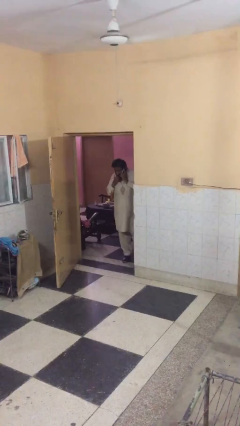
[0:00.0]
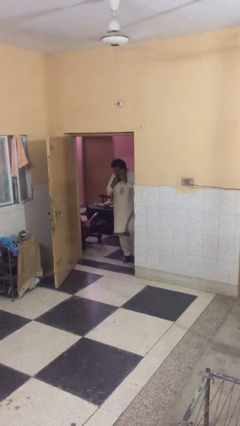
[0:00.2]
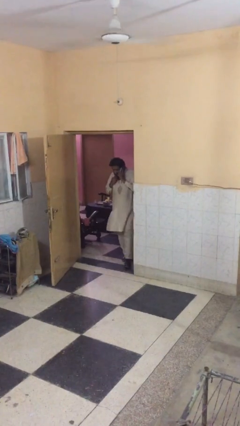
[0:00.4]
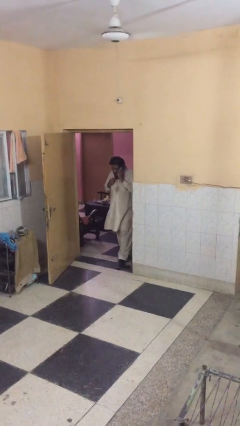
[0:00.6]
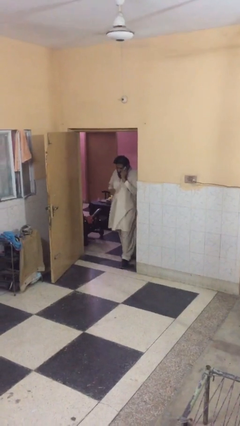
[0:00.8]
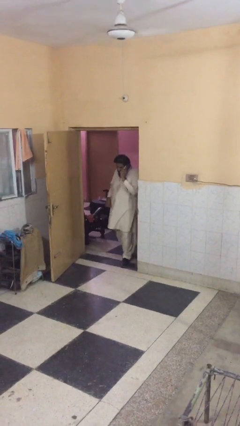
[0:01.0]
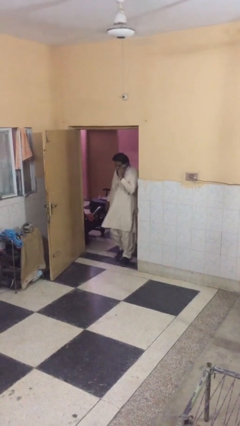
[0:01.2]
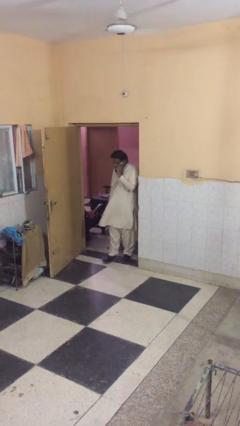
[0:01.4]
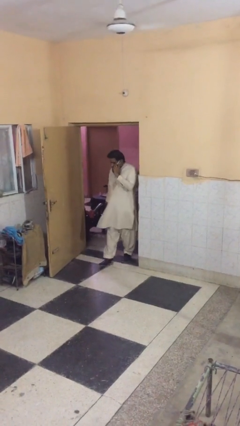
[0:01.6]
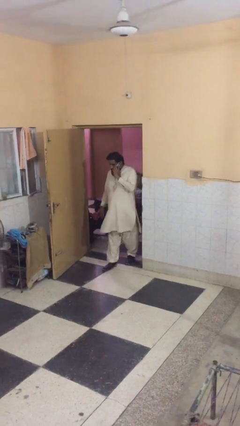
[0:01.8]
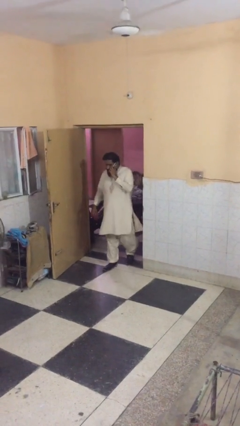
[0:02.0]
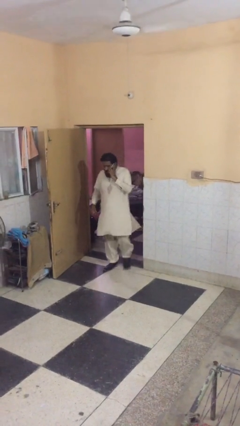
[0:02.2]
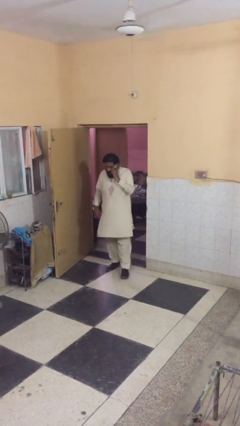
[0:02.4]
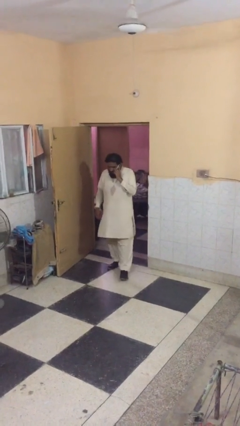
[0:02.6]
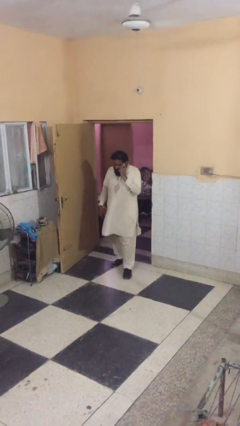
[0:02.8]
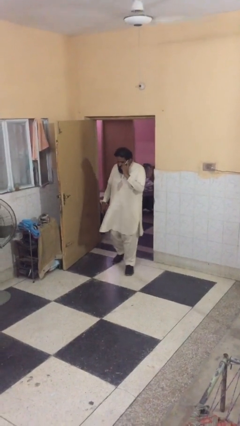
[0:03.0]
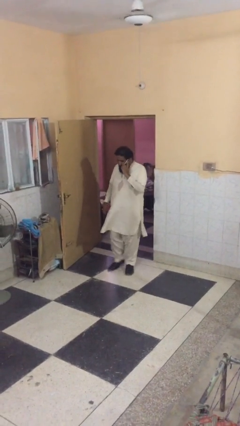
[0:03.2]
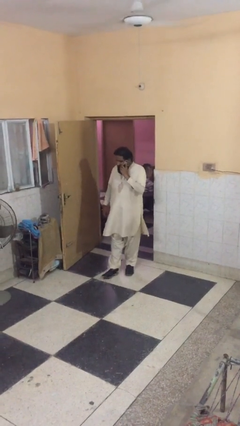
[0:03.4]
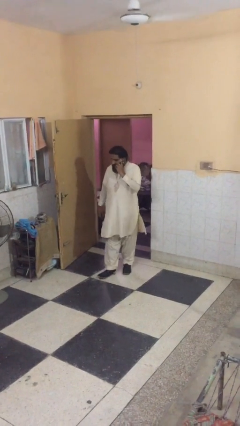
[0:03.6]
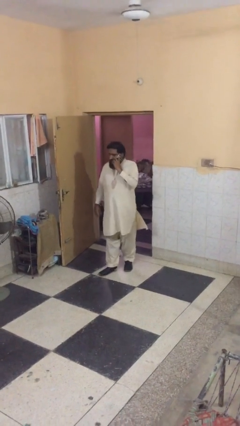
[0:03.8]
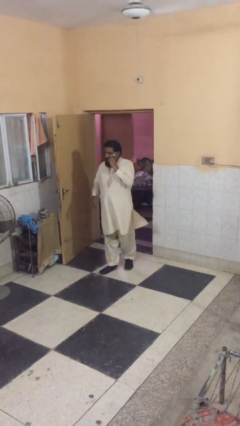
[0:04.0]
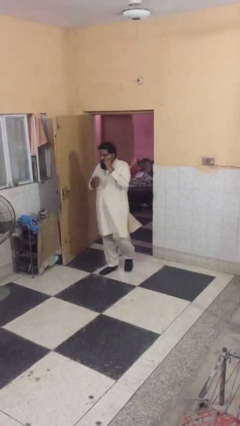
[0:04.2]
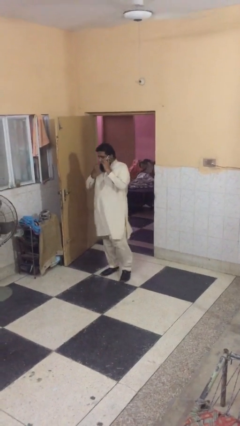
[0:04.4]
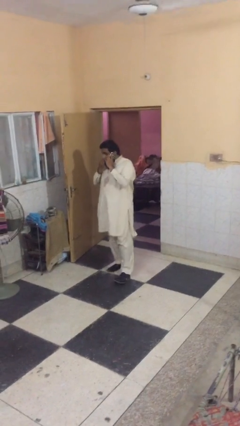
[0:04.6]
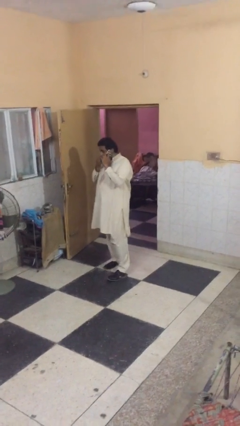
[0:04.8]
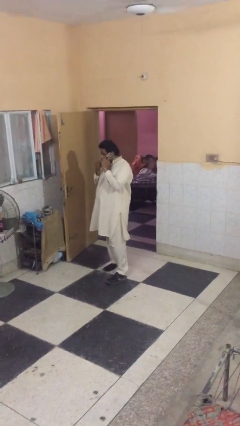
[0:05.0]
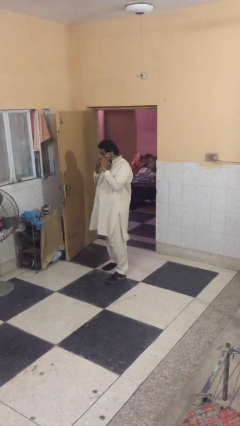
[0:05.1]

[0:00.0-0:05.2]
person enters scene through structure

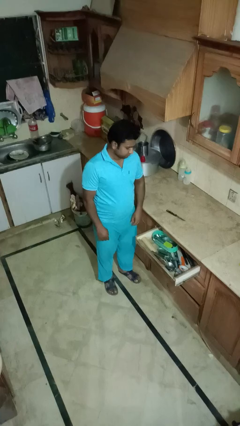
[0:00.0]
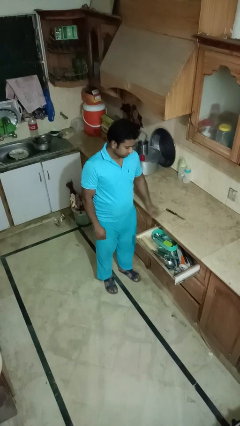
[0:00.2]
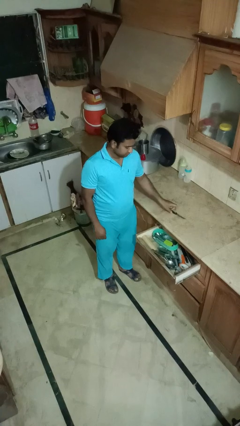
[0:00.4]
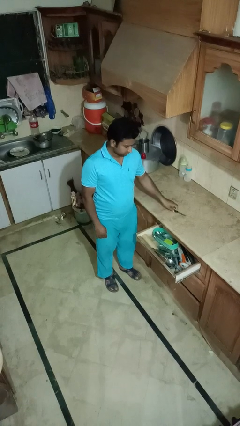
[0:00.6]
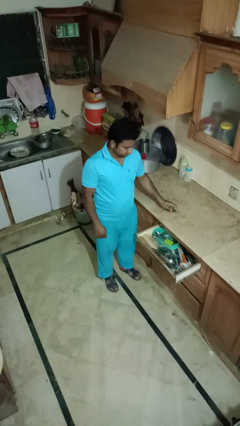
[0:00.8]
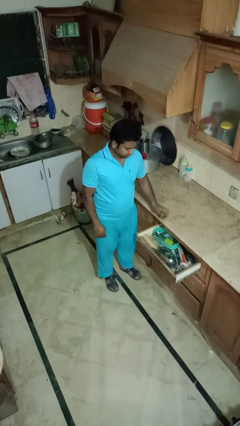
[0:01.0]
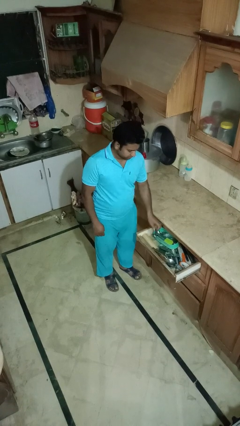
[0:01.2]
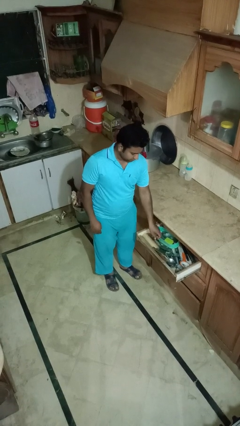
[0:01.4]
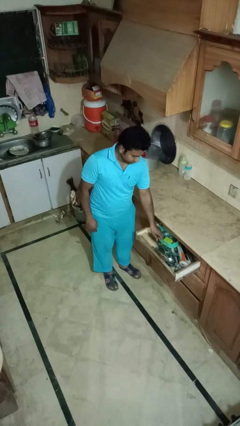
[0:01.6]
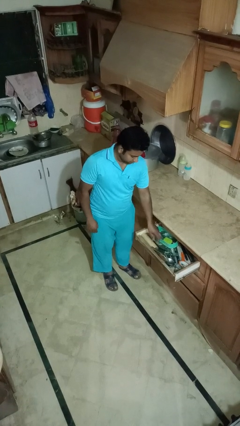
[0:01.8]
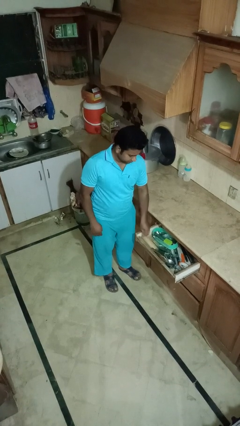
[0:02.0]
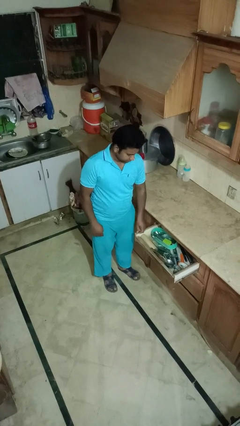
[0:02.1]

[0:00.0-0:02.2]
person puts object into kitchen drawer

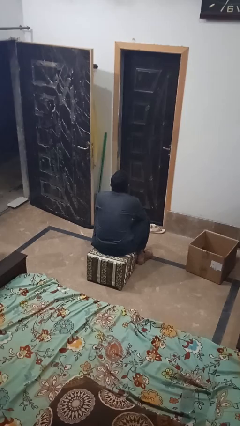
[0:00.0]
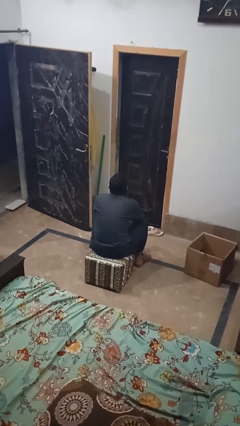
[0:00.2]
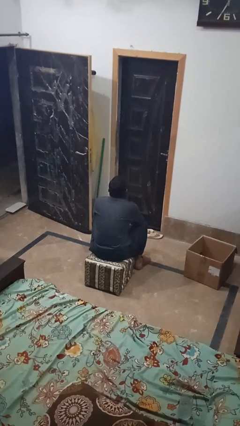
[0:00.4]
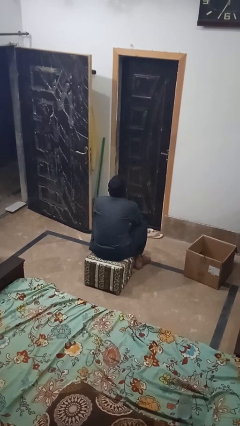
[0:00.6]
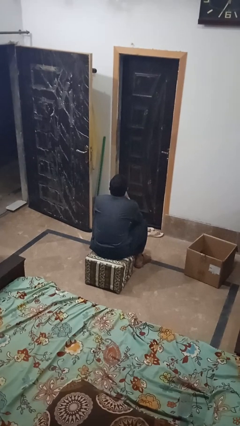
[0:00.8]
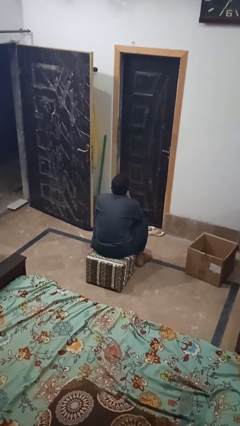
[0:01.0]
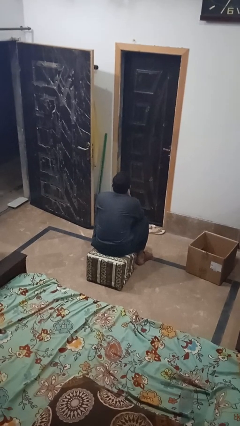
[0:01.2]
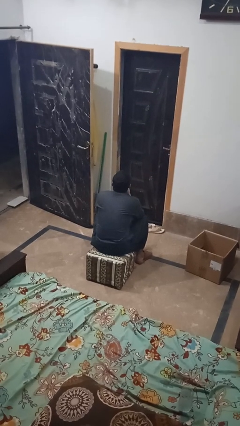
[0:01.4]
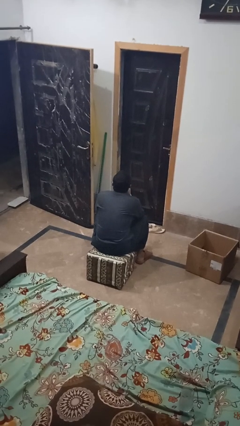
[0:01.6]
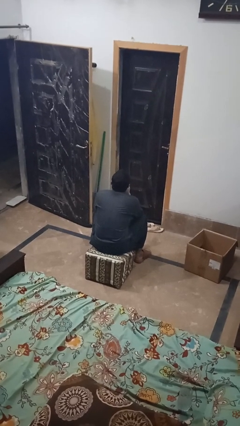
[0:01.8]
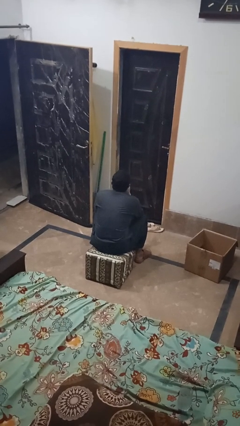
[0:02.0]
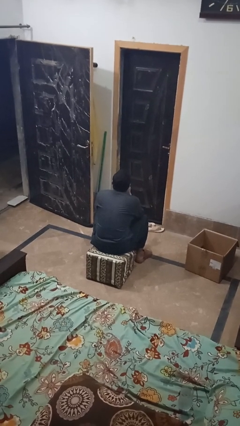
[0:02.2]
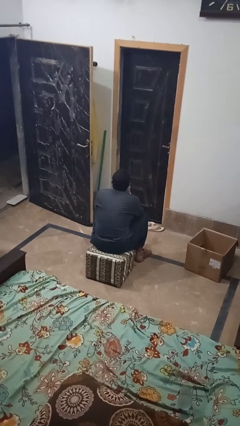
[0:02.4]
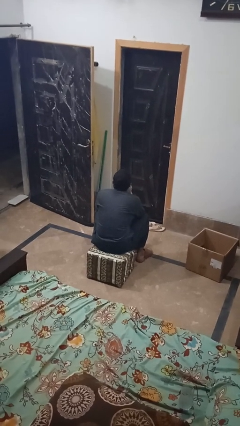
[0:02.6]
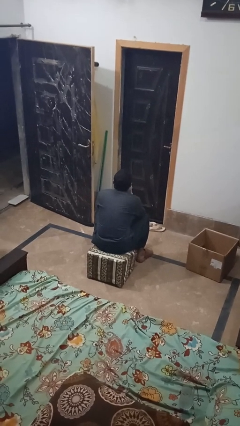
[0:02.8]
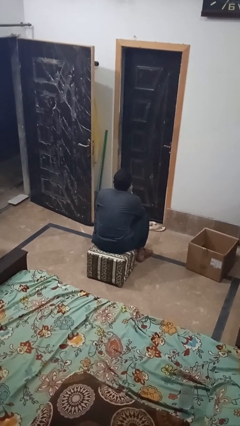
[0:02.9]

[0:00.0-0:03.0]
person strokes chin

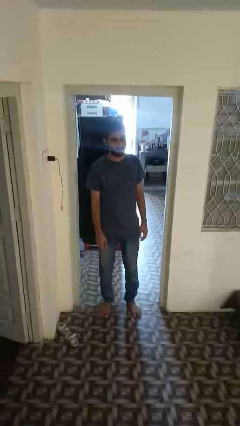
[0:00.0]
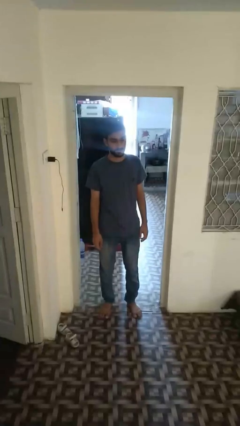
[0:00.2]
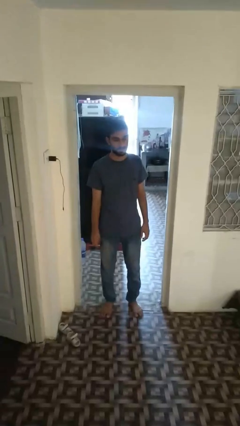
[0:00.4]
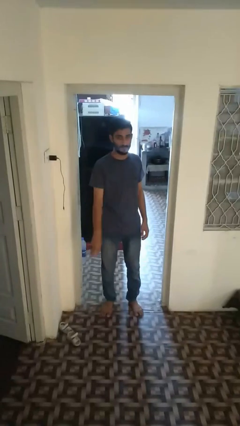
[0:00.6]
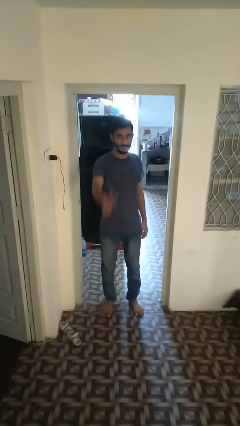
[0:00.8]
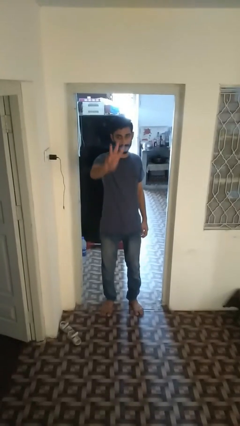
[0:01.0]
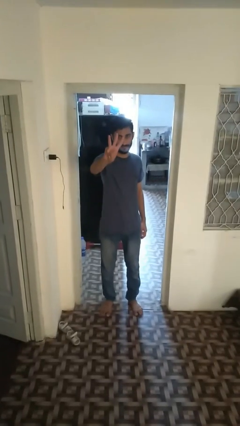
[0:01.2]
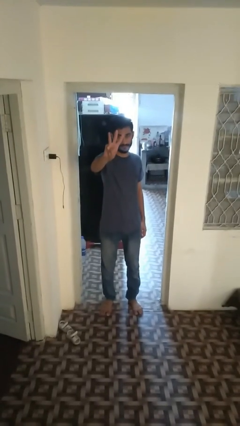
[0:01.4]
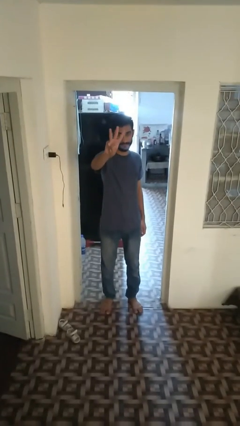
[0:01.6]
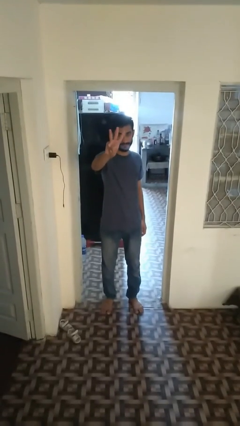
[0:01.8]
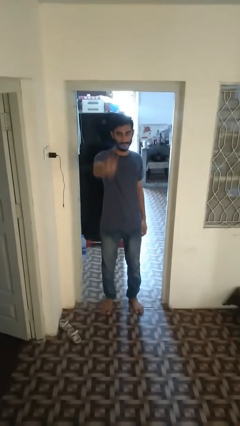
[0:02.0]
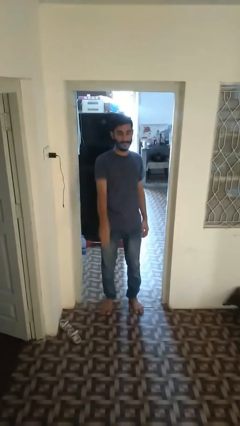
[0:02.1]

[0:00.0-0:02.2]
person gestures number three

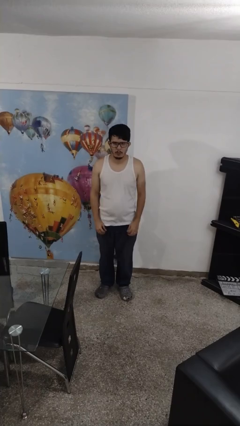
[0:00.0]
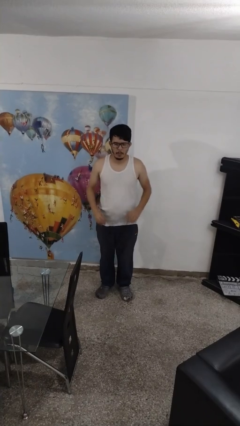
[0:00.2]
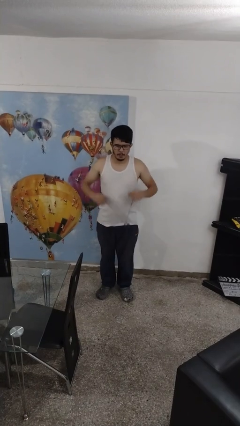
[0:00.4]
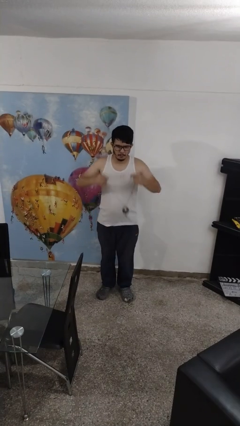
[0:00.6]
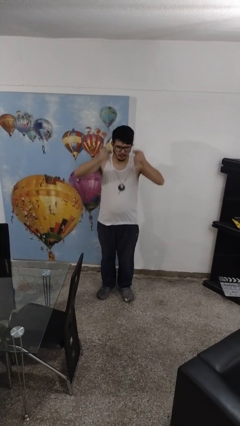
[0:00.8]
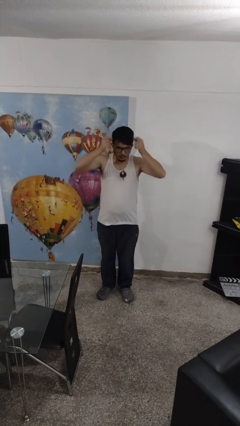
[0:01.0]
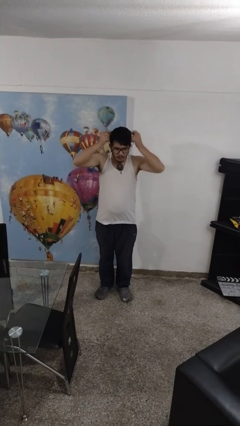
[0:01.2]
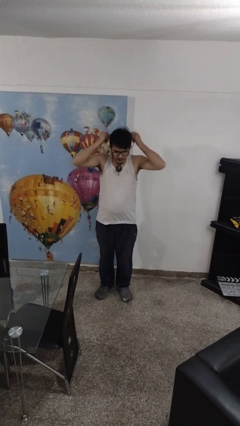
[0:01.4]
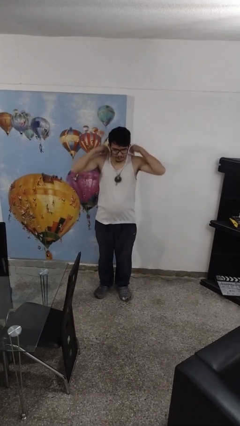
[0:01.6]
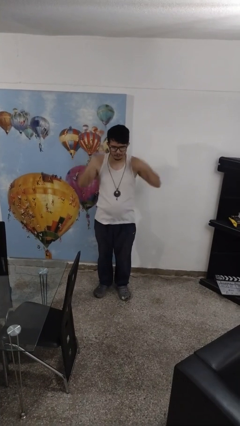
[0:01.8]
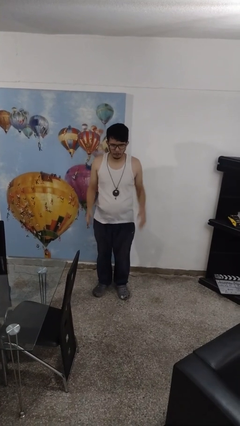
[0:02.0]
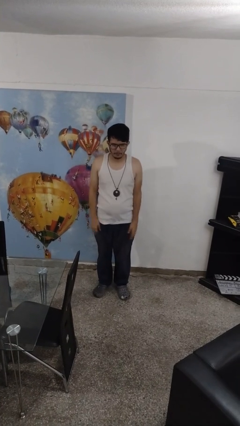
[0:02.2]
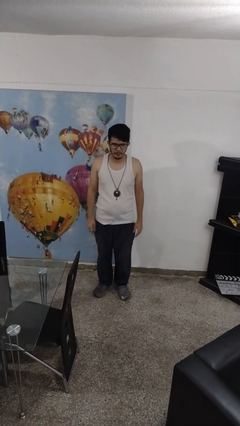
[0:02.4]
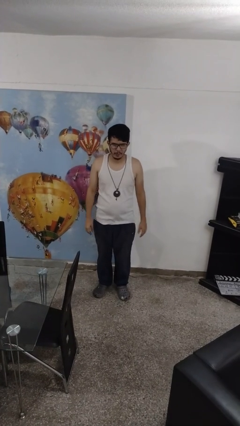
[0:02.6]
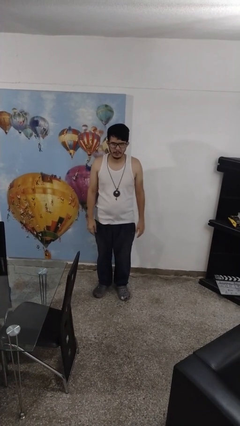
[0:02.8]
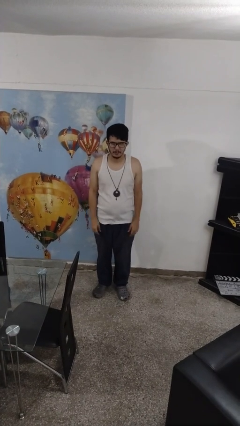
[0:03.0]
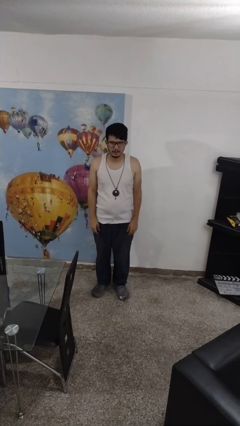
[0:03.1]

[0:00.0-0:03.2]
person puts on necklace

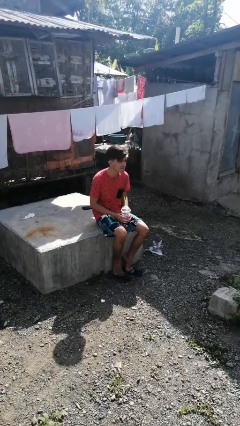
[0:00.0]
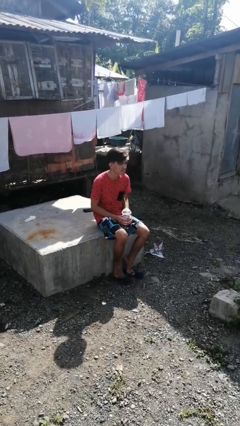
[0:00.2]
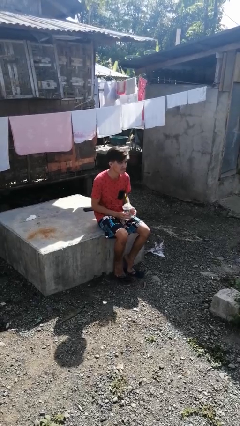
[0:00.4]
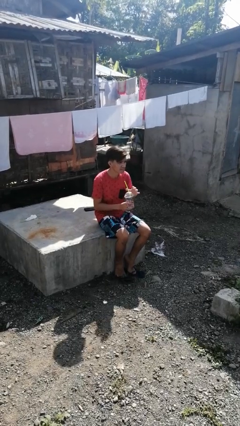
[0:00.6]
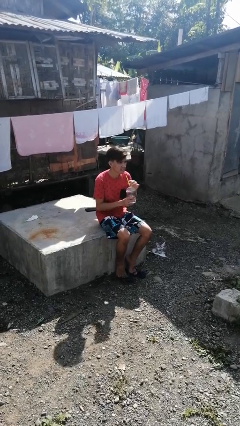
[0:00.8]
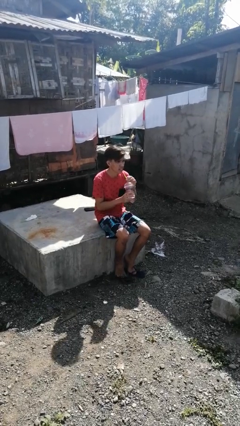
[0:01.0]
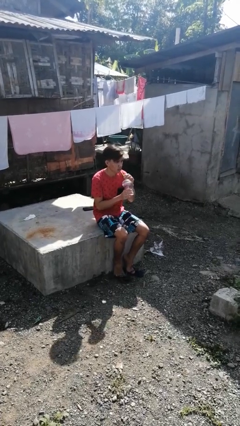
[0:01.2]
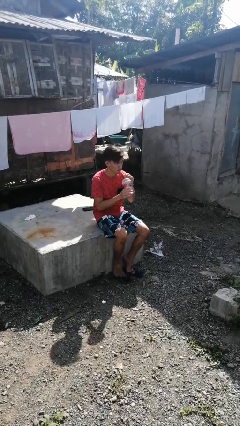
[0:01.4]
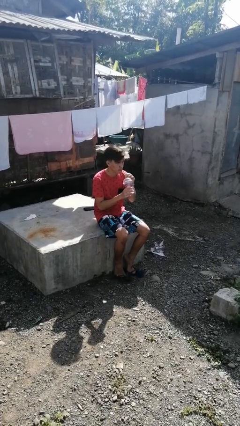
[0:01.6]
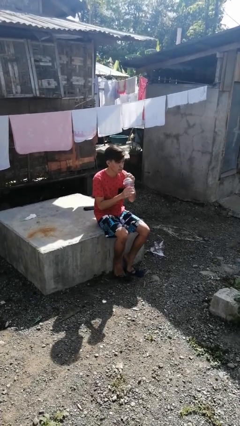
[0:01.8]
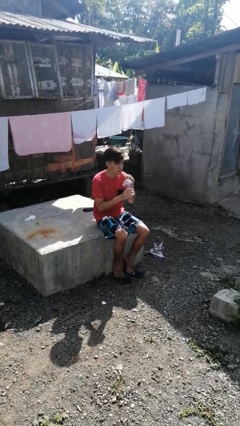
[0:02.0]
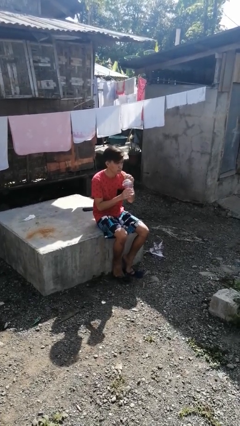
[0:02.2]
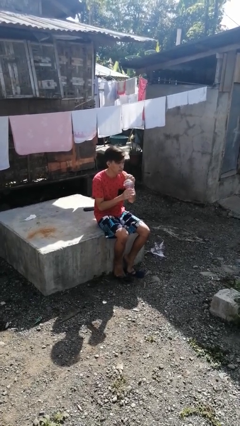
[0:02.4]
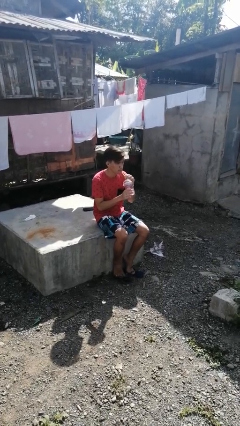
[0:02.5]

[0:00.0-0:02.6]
person drinks from straw
